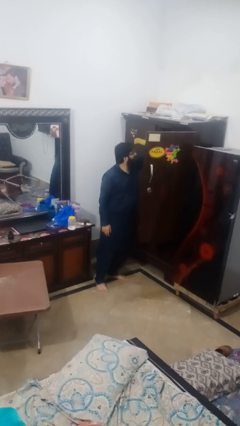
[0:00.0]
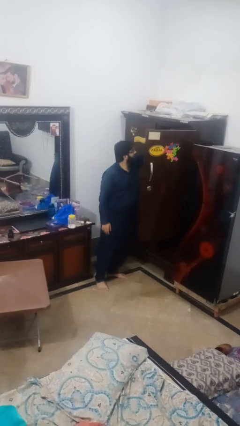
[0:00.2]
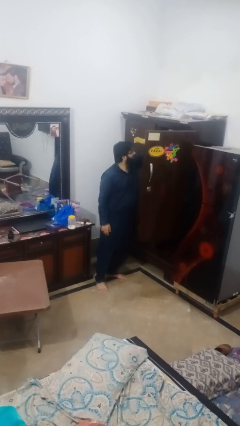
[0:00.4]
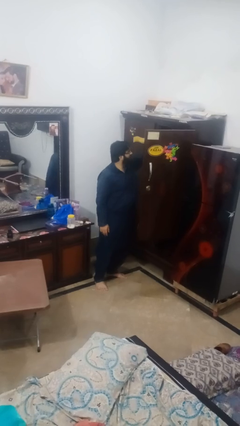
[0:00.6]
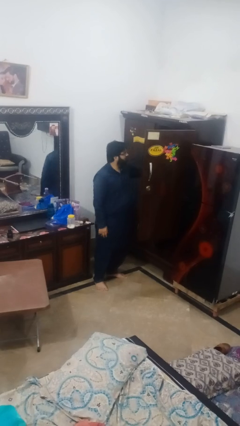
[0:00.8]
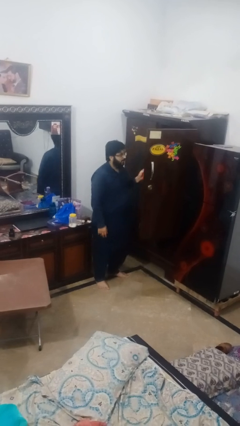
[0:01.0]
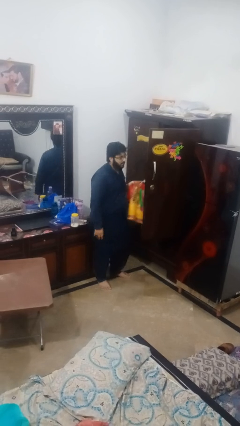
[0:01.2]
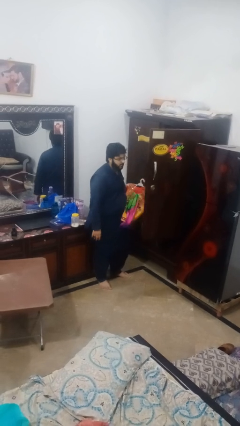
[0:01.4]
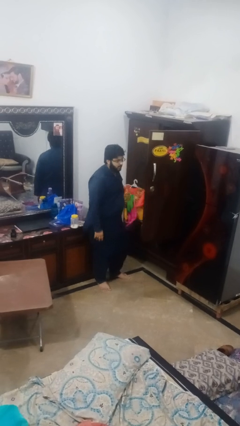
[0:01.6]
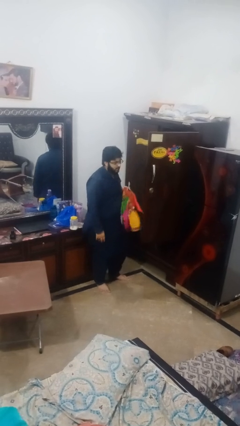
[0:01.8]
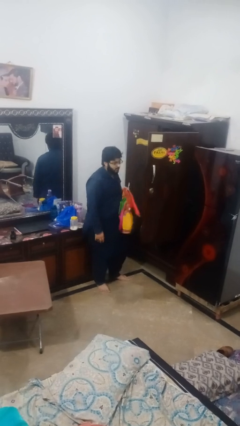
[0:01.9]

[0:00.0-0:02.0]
person takes clothes from closet

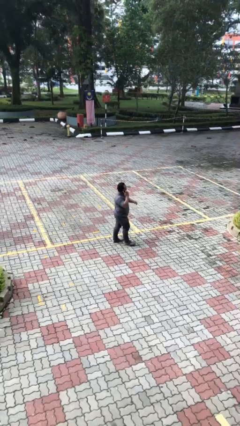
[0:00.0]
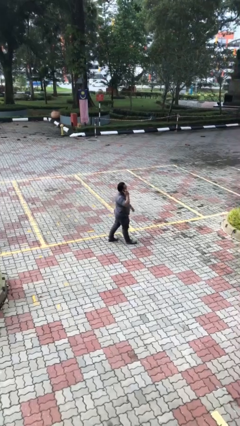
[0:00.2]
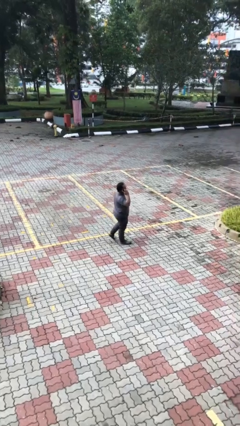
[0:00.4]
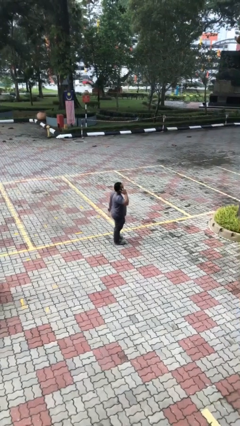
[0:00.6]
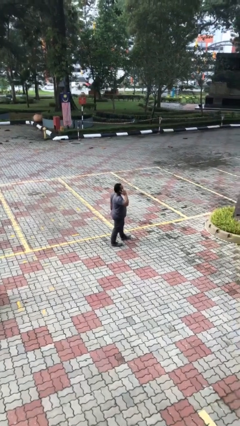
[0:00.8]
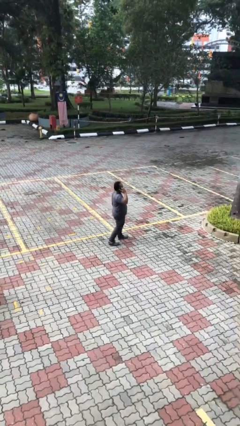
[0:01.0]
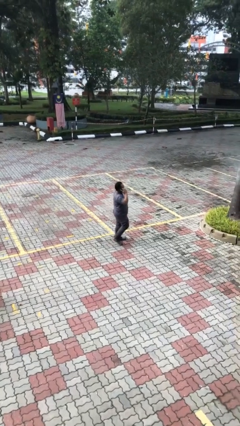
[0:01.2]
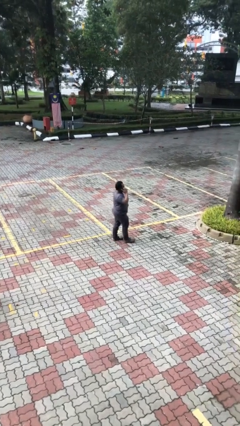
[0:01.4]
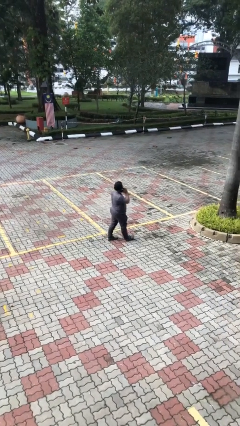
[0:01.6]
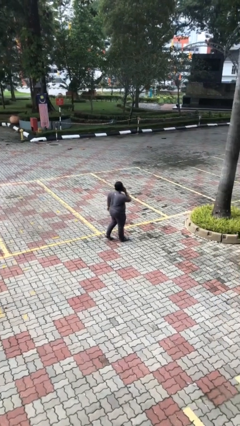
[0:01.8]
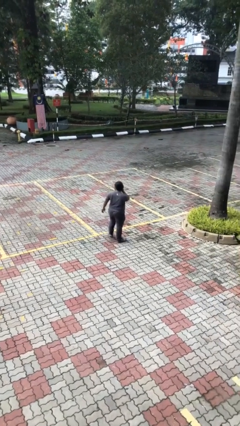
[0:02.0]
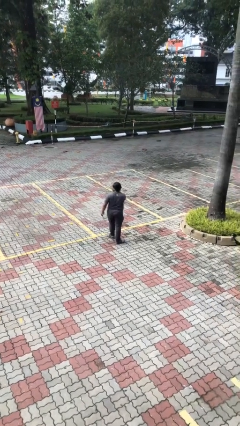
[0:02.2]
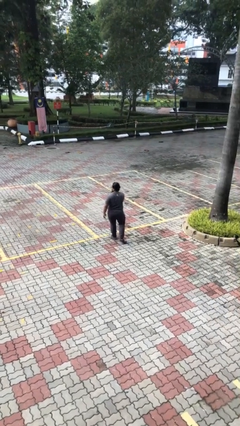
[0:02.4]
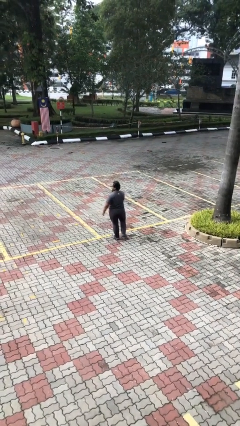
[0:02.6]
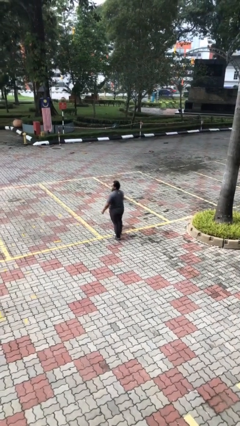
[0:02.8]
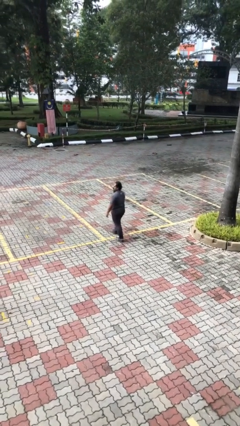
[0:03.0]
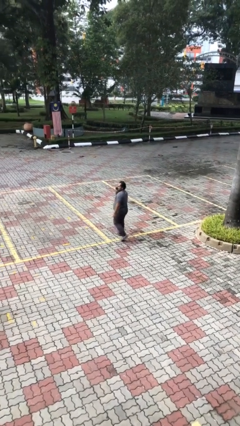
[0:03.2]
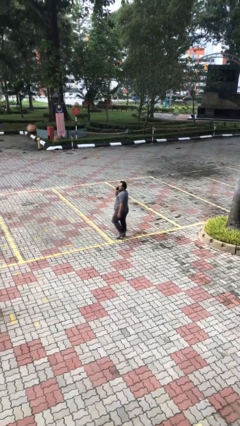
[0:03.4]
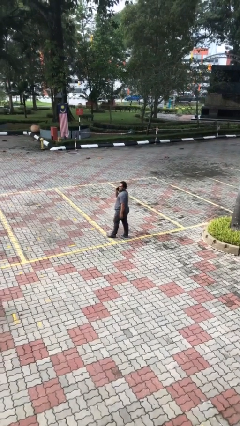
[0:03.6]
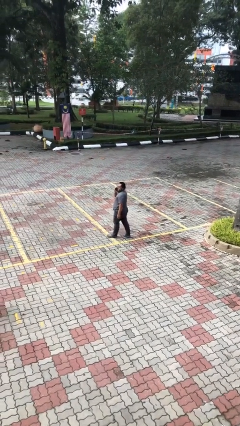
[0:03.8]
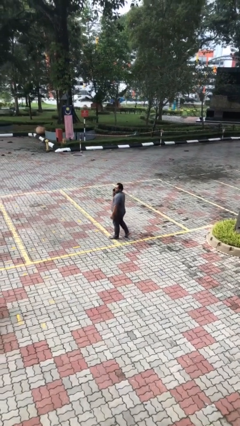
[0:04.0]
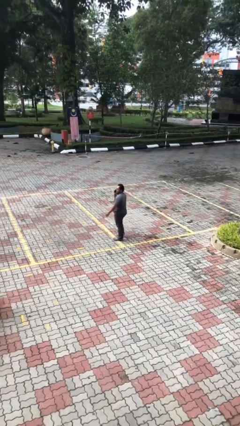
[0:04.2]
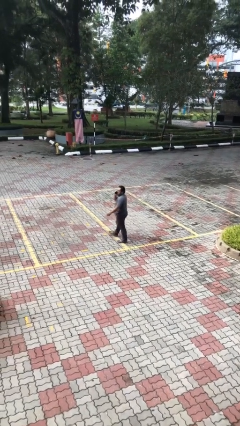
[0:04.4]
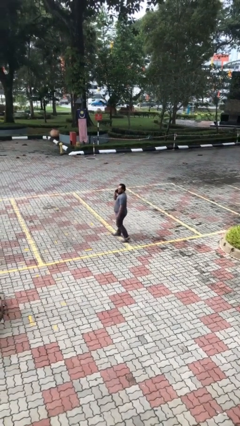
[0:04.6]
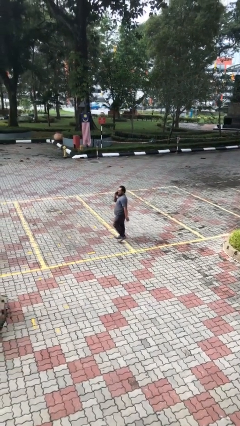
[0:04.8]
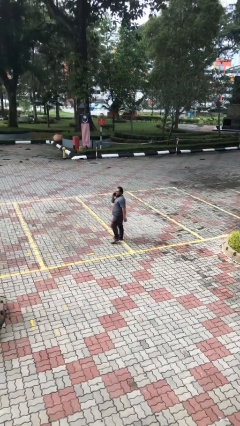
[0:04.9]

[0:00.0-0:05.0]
person talks on phone

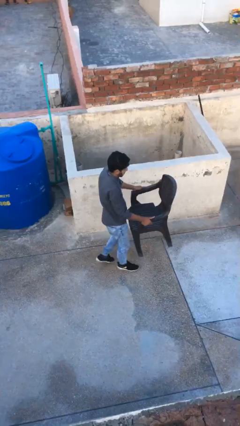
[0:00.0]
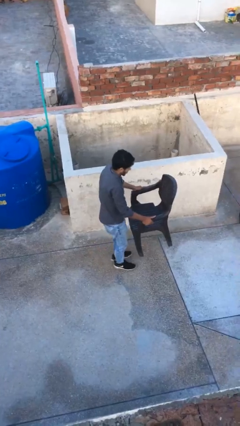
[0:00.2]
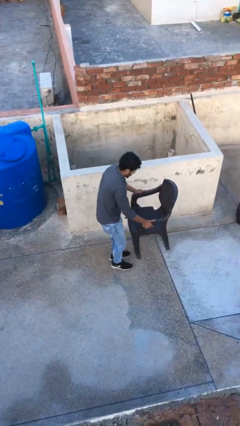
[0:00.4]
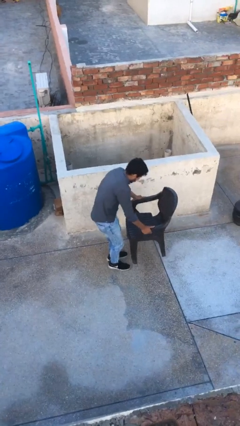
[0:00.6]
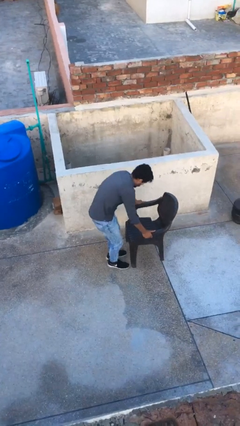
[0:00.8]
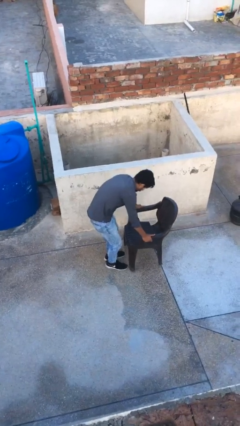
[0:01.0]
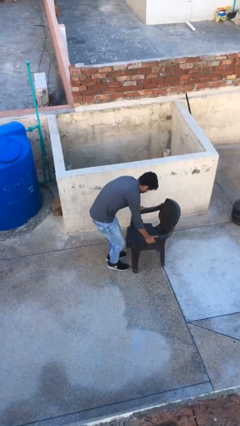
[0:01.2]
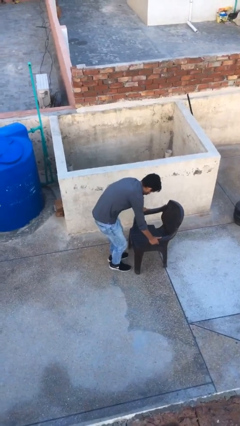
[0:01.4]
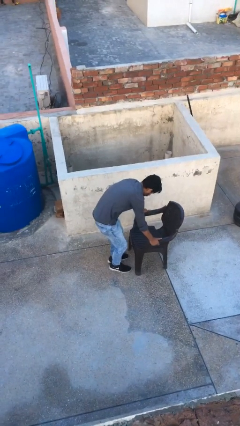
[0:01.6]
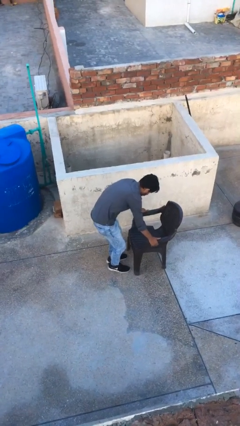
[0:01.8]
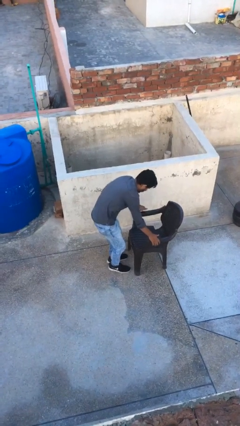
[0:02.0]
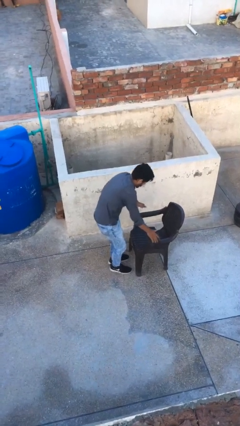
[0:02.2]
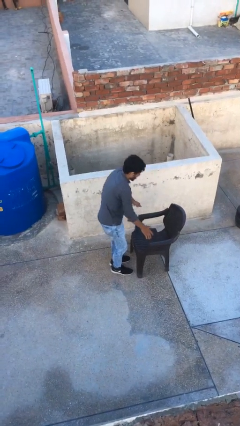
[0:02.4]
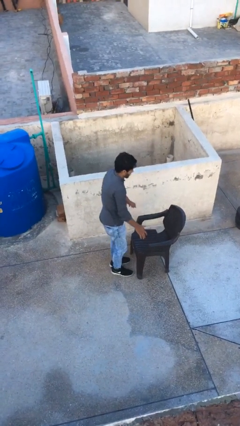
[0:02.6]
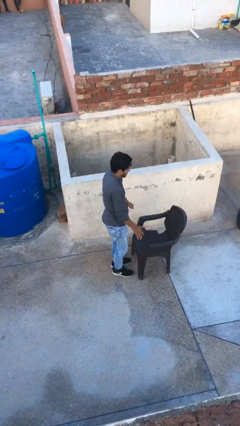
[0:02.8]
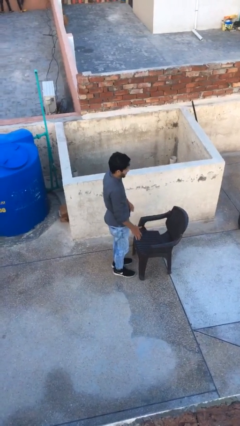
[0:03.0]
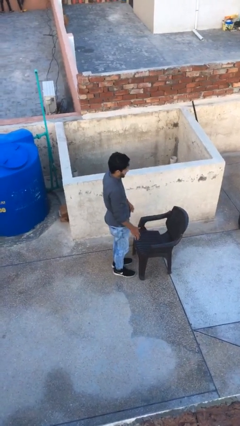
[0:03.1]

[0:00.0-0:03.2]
person puts down object on floor

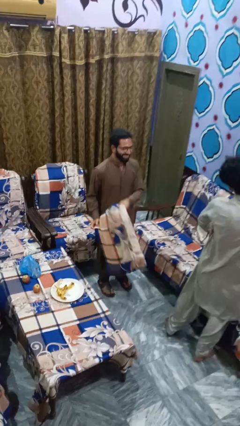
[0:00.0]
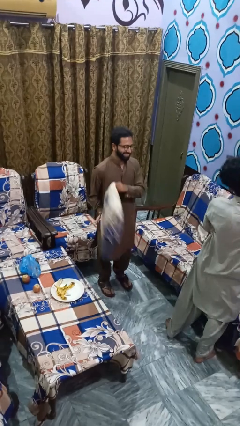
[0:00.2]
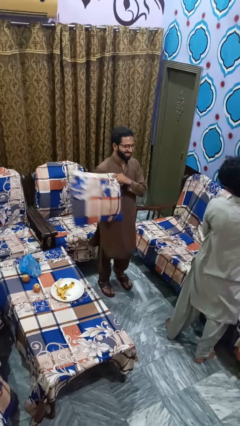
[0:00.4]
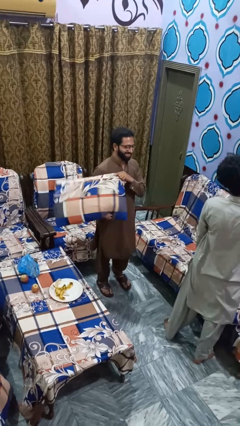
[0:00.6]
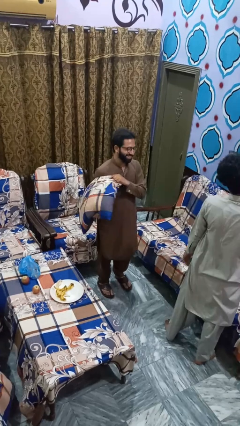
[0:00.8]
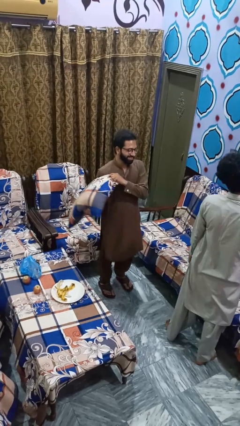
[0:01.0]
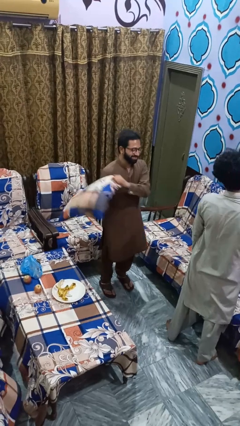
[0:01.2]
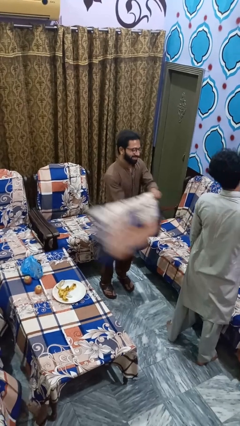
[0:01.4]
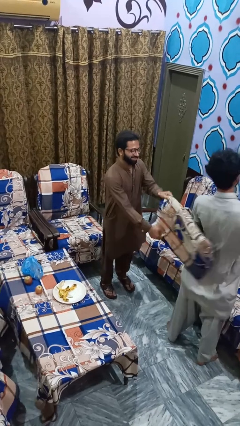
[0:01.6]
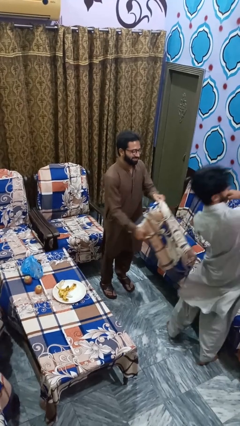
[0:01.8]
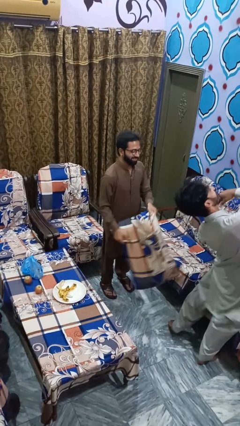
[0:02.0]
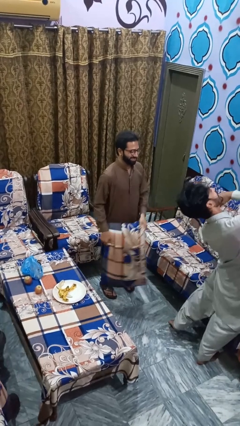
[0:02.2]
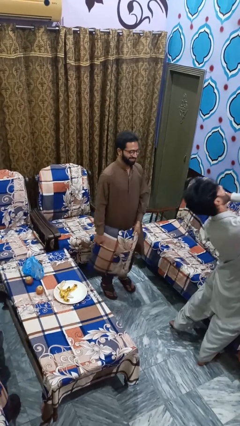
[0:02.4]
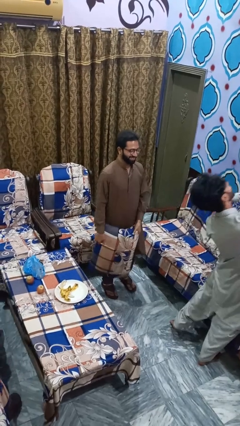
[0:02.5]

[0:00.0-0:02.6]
person hits person with pillow

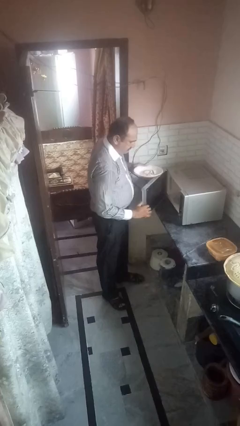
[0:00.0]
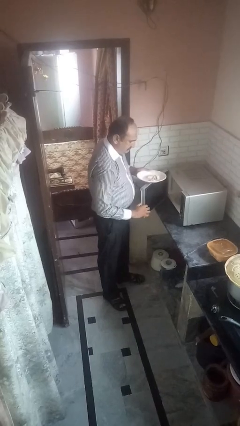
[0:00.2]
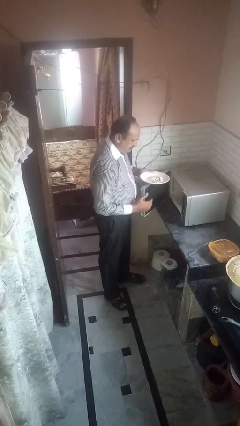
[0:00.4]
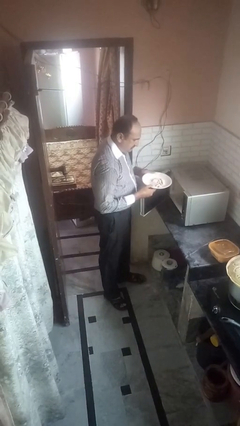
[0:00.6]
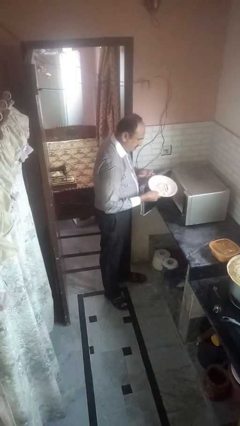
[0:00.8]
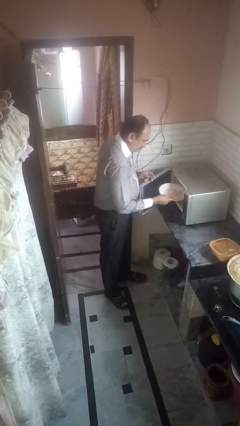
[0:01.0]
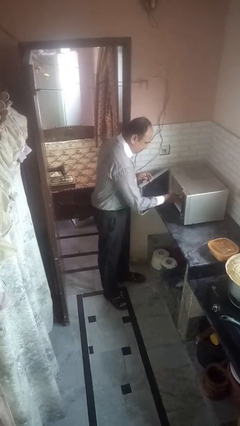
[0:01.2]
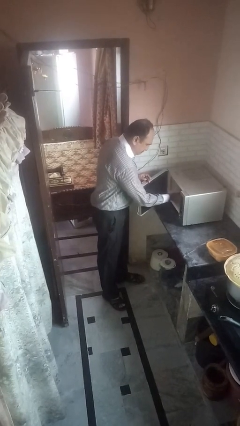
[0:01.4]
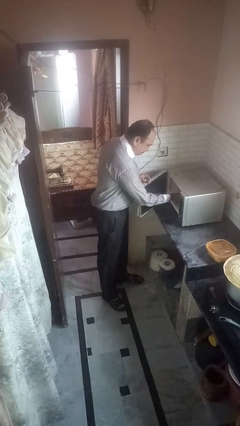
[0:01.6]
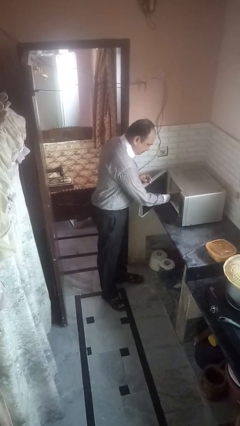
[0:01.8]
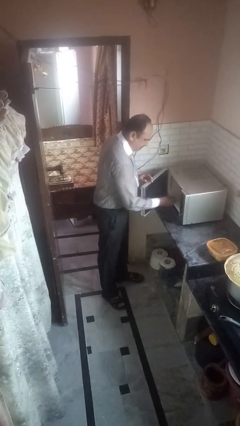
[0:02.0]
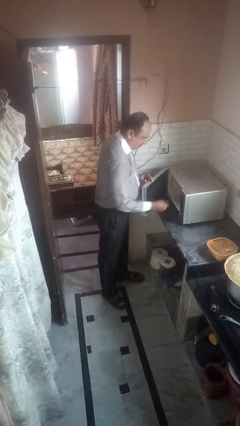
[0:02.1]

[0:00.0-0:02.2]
person puts object into microwave

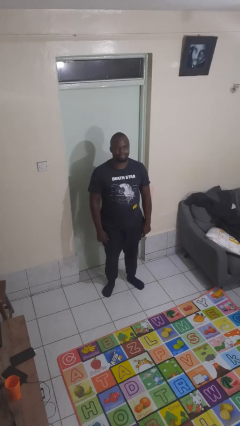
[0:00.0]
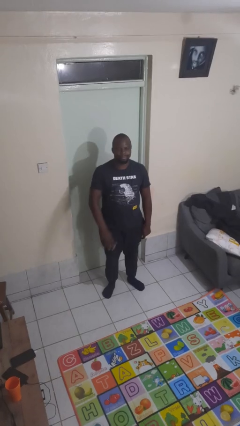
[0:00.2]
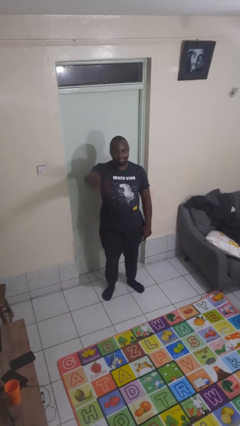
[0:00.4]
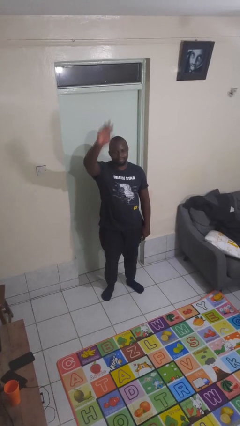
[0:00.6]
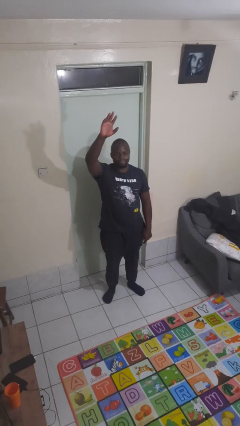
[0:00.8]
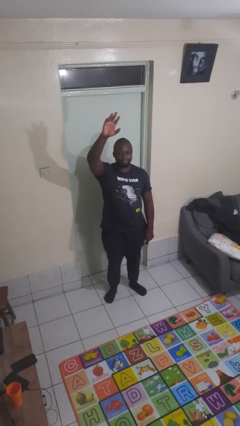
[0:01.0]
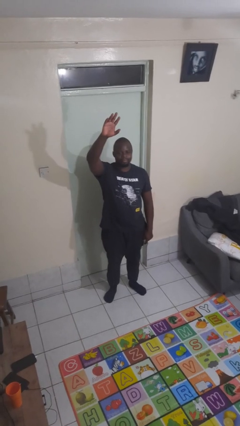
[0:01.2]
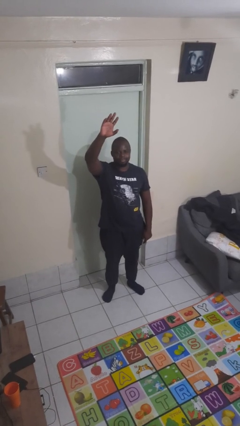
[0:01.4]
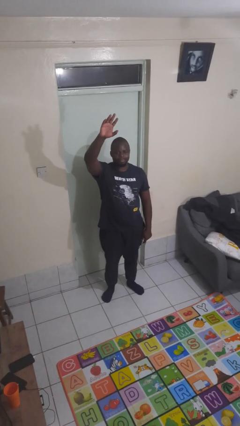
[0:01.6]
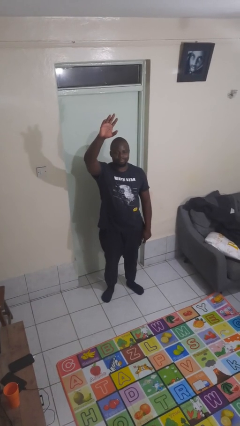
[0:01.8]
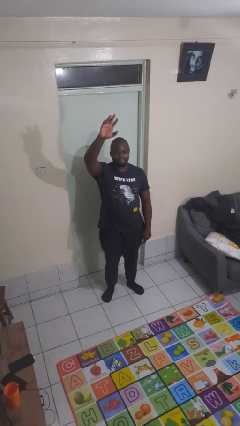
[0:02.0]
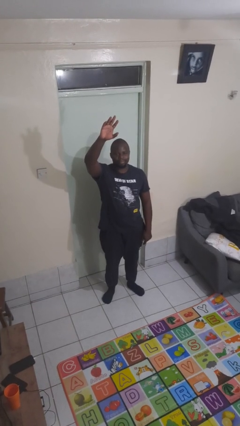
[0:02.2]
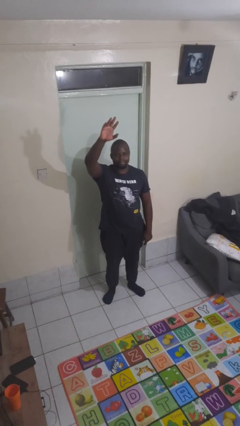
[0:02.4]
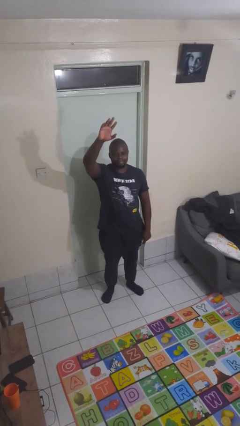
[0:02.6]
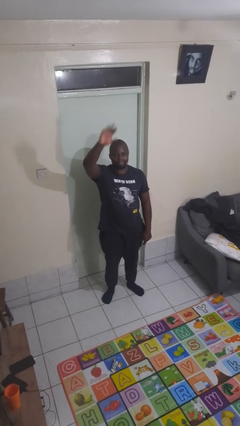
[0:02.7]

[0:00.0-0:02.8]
person gestures raise hand
